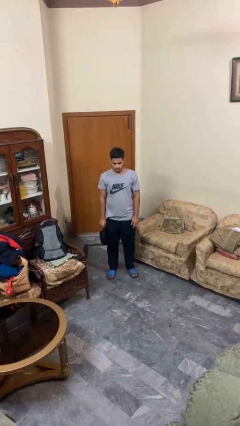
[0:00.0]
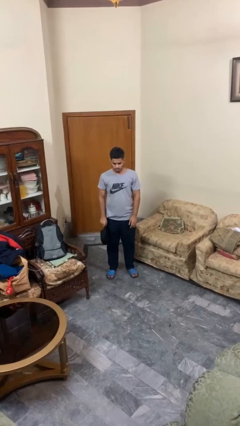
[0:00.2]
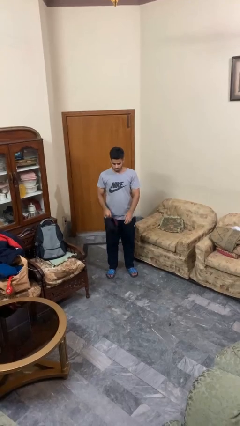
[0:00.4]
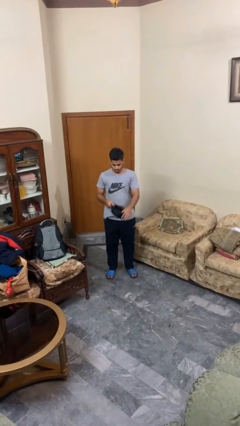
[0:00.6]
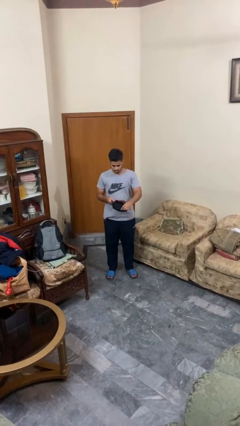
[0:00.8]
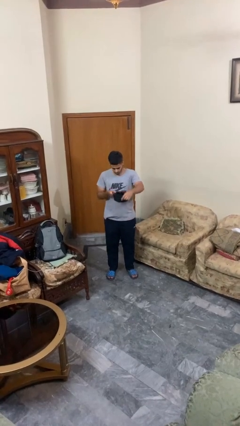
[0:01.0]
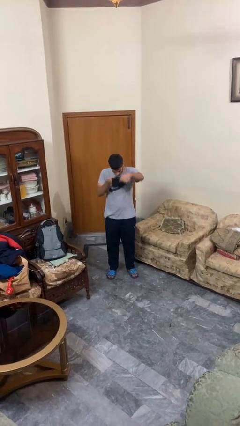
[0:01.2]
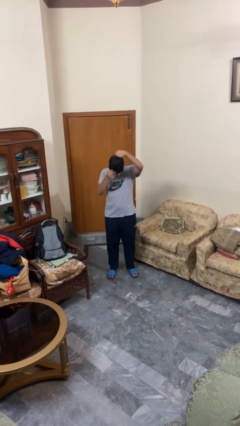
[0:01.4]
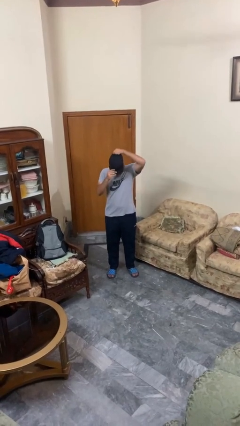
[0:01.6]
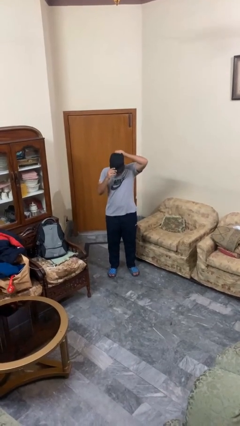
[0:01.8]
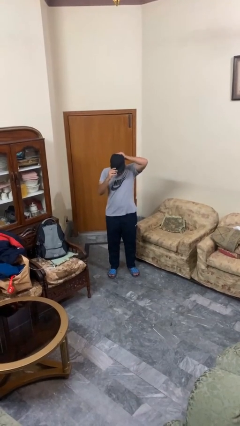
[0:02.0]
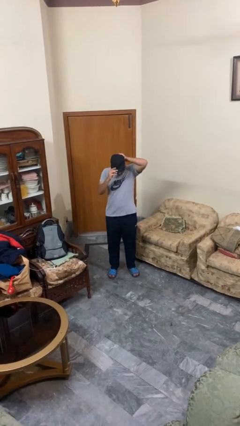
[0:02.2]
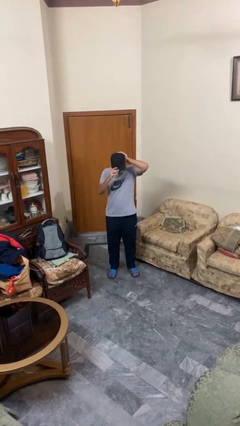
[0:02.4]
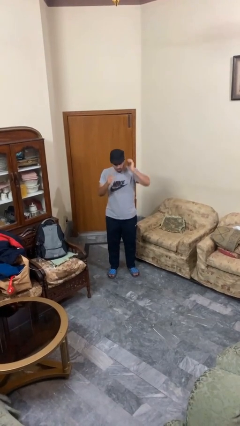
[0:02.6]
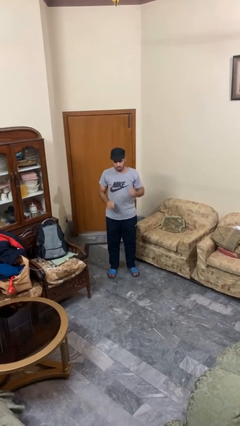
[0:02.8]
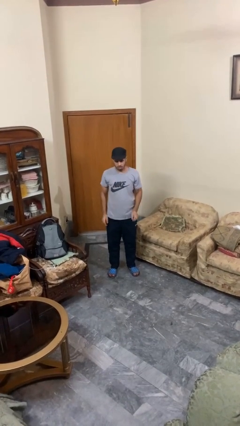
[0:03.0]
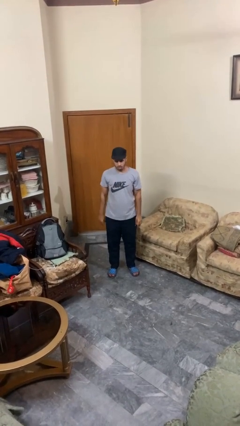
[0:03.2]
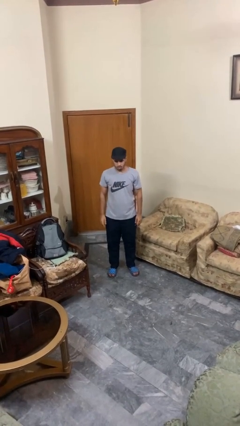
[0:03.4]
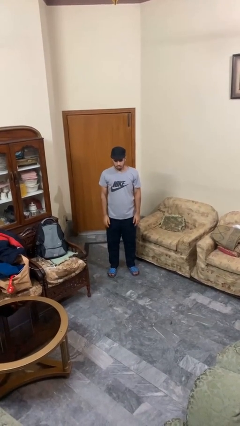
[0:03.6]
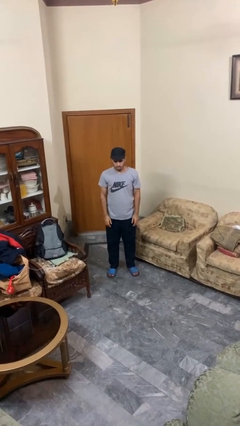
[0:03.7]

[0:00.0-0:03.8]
person puts on hat

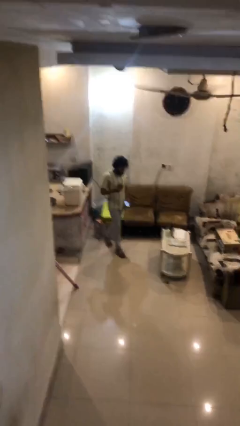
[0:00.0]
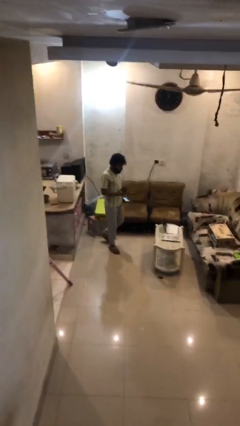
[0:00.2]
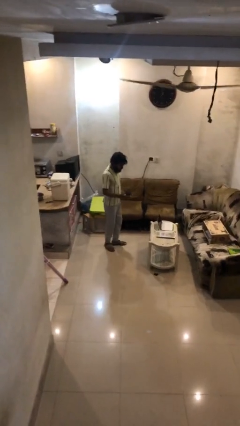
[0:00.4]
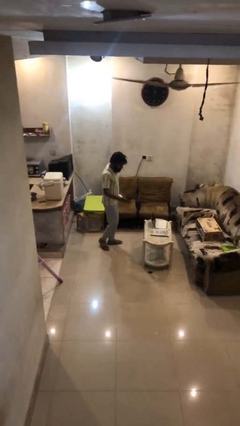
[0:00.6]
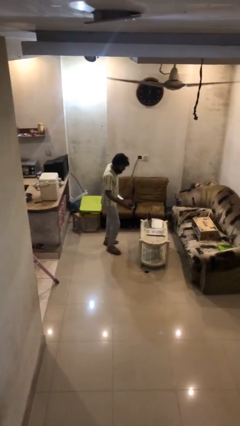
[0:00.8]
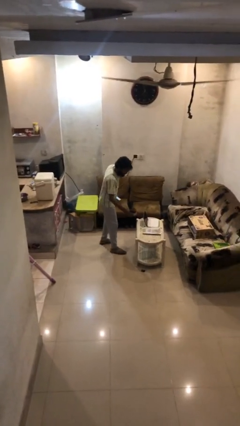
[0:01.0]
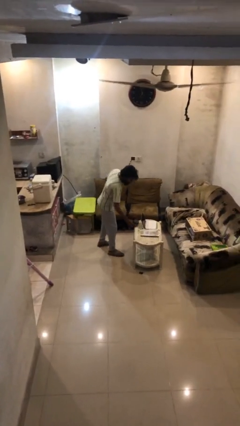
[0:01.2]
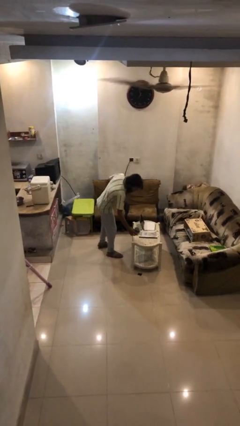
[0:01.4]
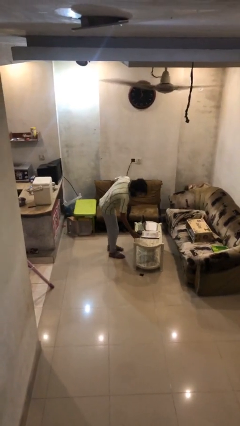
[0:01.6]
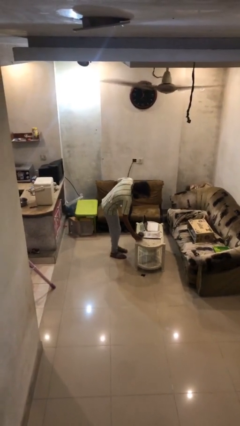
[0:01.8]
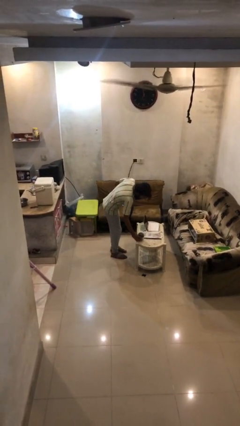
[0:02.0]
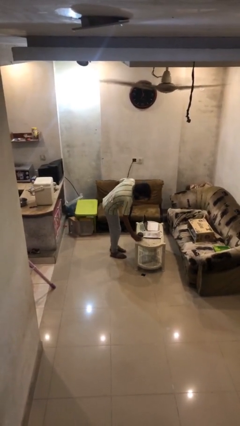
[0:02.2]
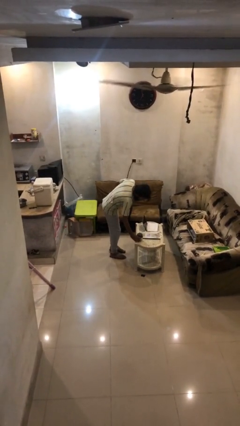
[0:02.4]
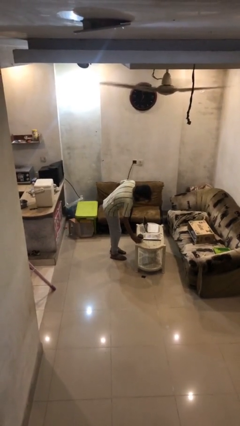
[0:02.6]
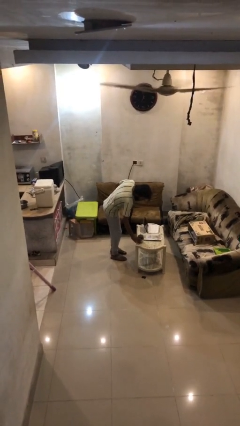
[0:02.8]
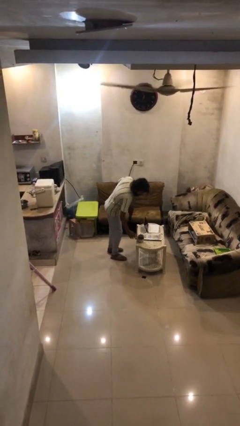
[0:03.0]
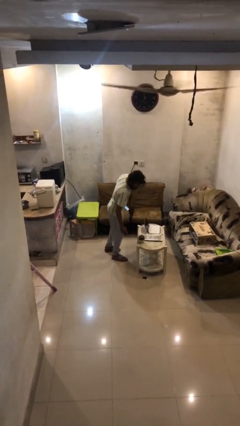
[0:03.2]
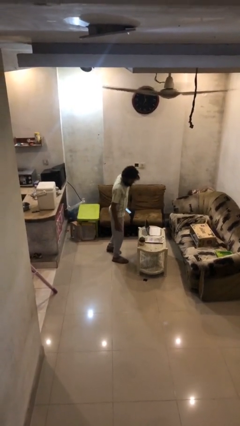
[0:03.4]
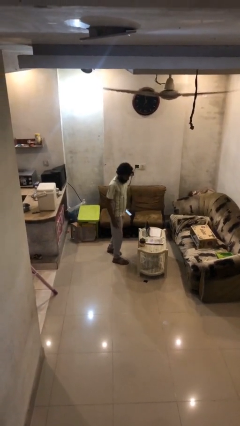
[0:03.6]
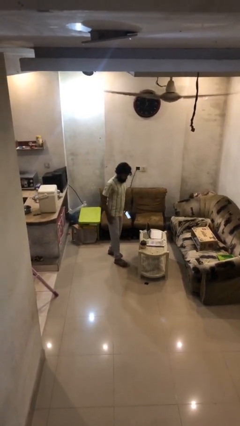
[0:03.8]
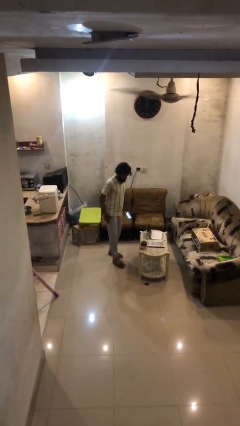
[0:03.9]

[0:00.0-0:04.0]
person puts down object on table

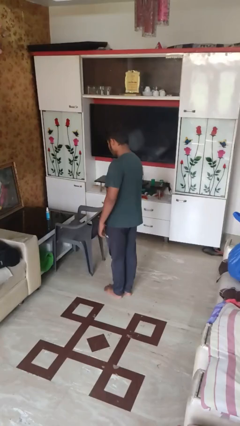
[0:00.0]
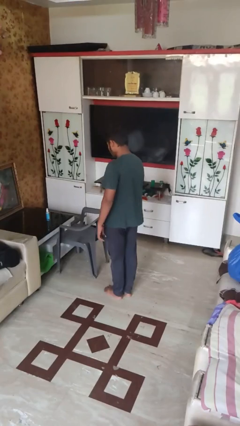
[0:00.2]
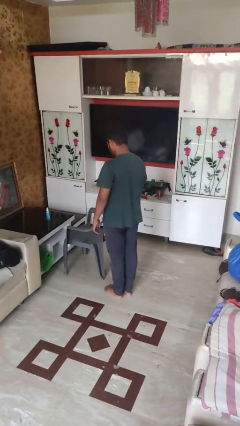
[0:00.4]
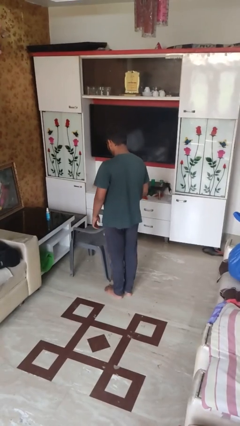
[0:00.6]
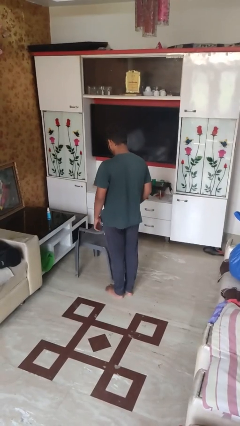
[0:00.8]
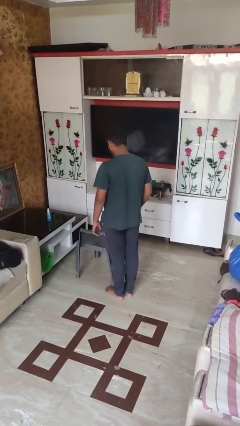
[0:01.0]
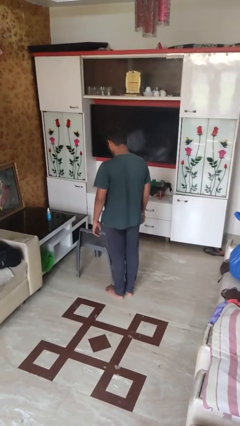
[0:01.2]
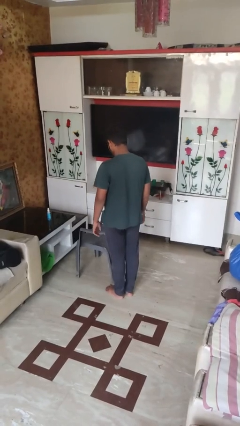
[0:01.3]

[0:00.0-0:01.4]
person pulls out chair

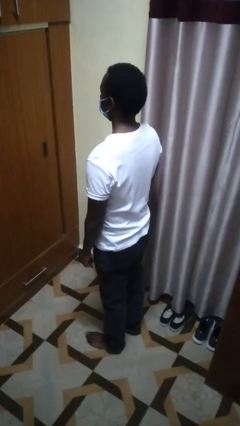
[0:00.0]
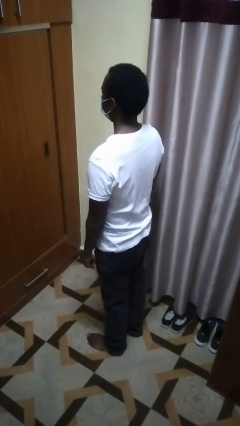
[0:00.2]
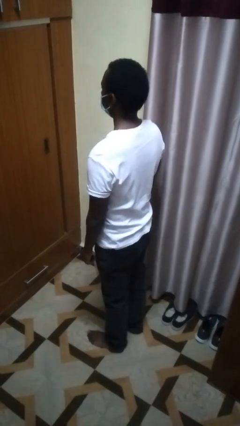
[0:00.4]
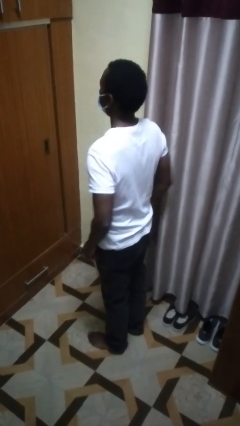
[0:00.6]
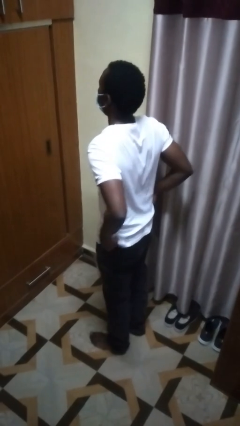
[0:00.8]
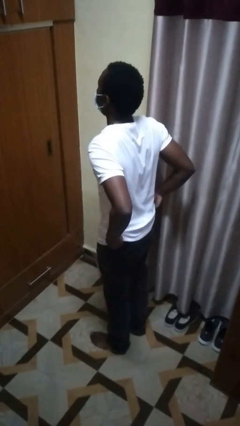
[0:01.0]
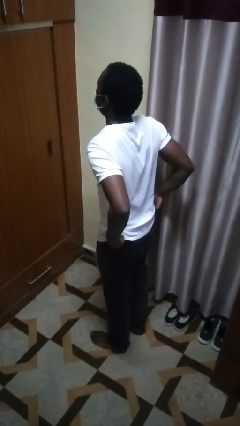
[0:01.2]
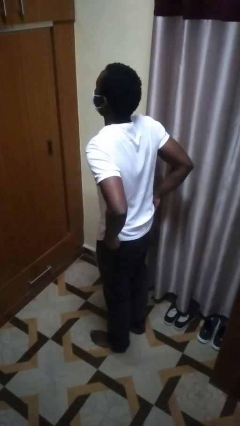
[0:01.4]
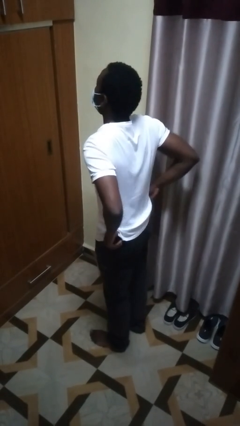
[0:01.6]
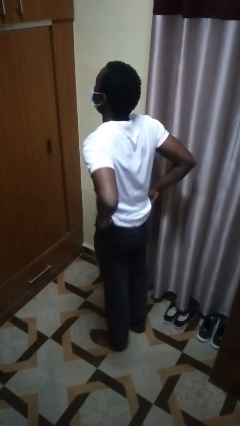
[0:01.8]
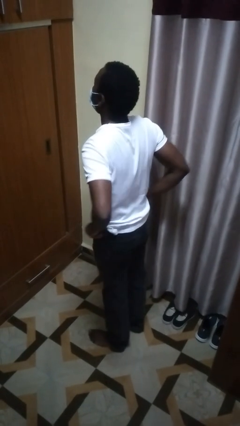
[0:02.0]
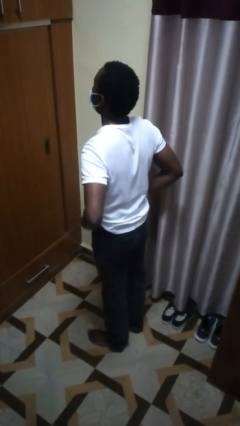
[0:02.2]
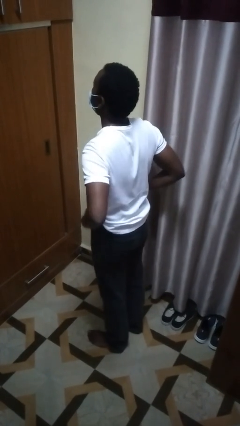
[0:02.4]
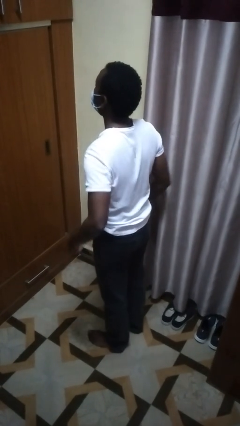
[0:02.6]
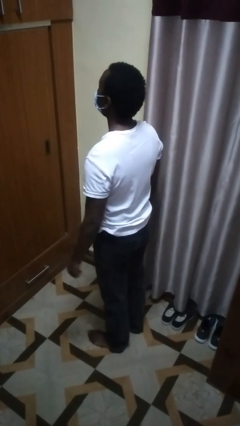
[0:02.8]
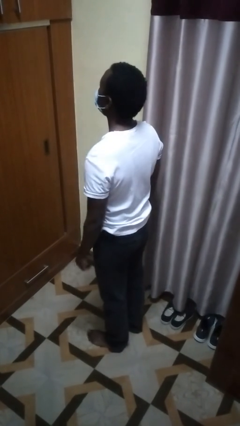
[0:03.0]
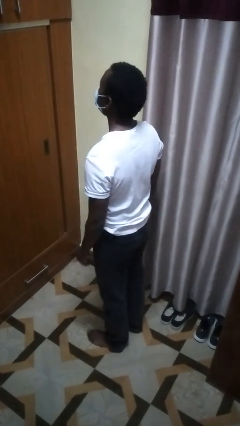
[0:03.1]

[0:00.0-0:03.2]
person hikes up pants

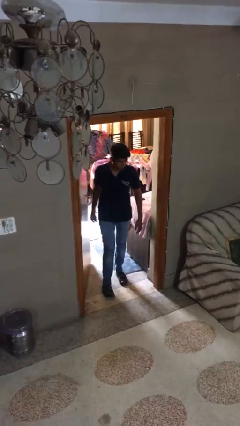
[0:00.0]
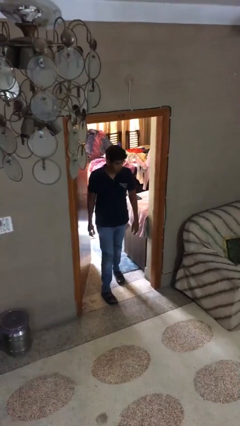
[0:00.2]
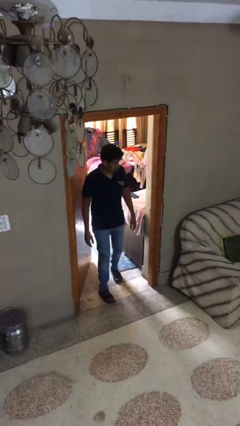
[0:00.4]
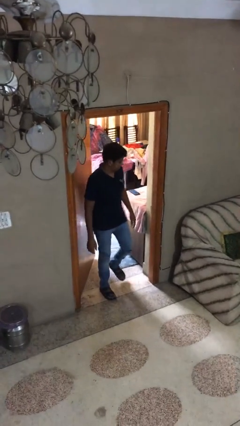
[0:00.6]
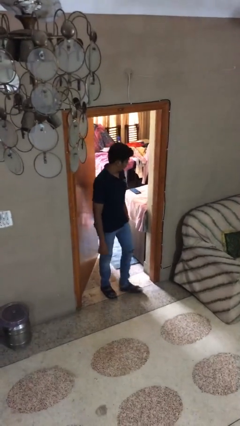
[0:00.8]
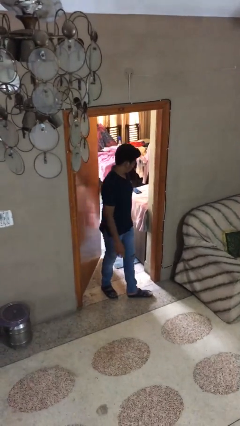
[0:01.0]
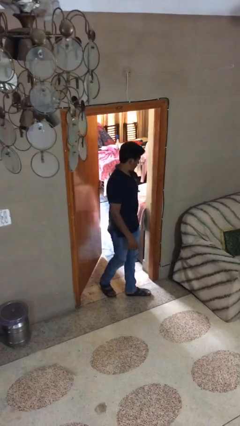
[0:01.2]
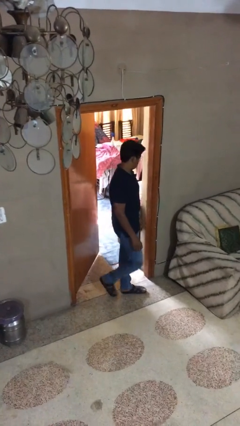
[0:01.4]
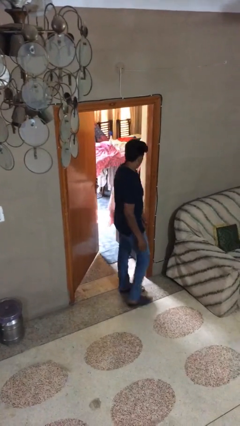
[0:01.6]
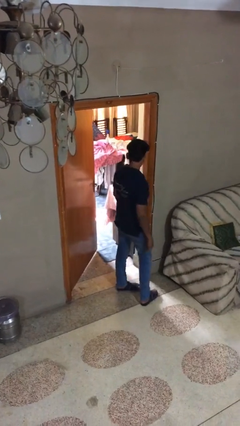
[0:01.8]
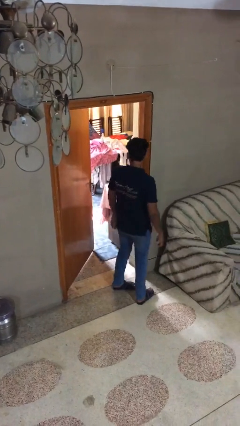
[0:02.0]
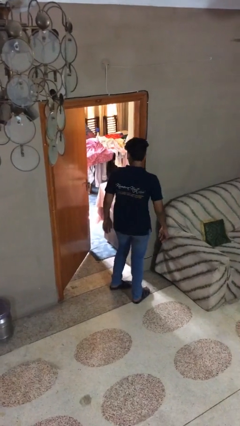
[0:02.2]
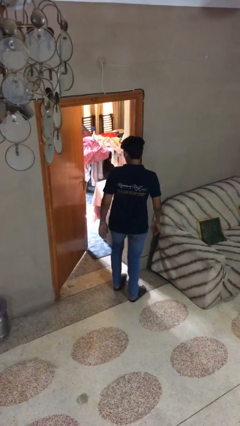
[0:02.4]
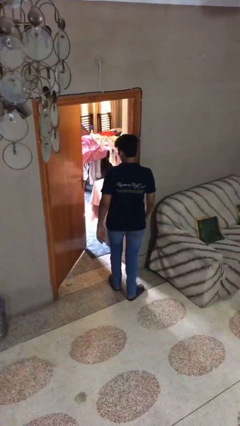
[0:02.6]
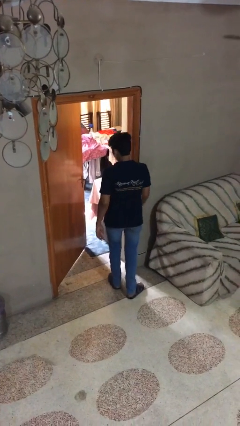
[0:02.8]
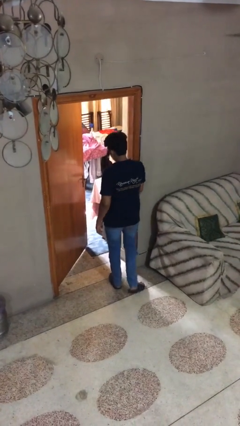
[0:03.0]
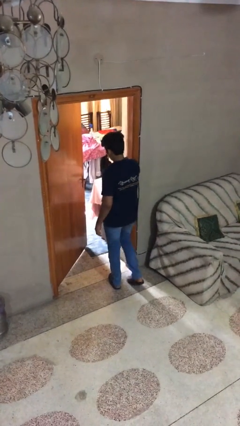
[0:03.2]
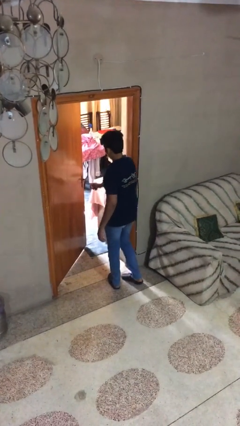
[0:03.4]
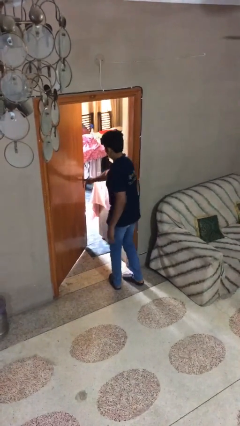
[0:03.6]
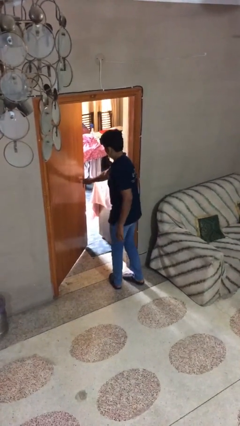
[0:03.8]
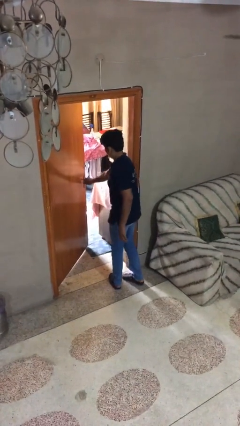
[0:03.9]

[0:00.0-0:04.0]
person enters scene through structure

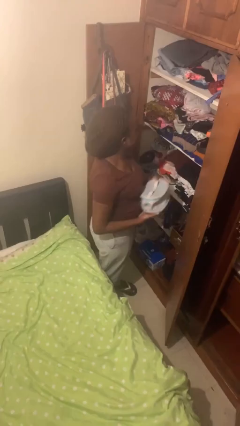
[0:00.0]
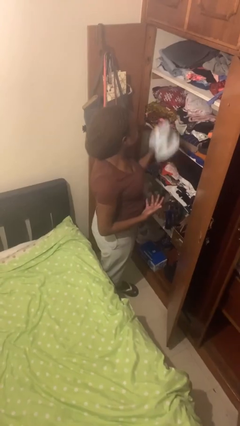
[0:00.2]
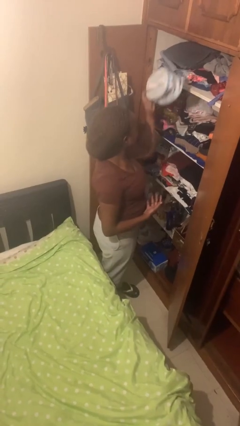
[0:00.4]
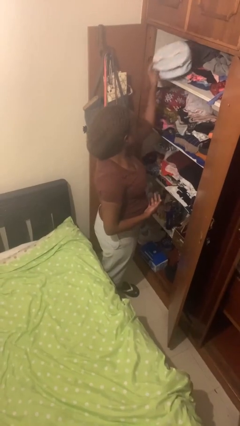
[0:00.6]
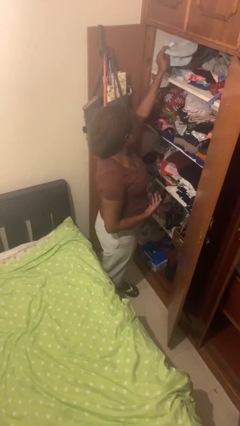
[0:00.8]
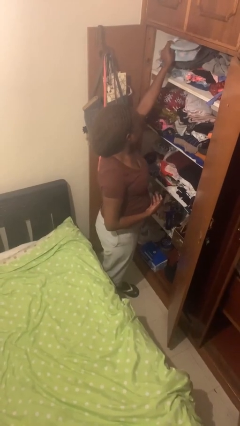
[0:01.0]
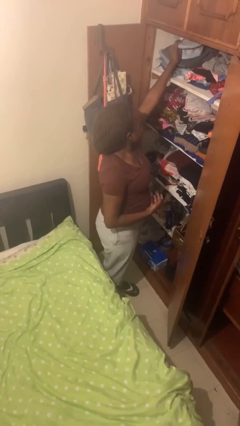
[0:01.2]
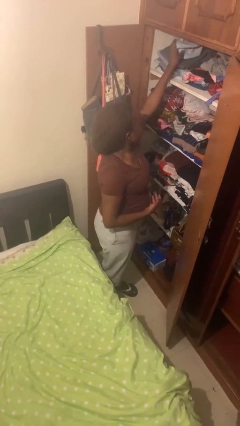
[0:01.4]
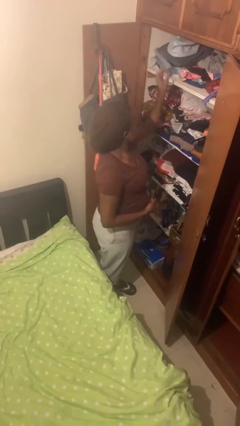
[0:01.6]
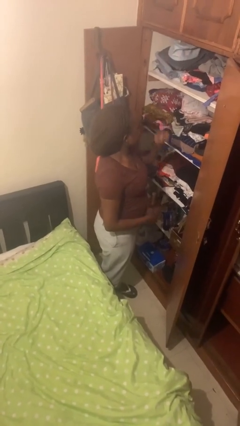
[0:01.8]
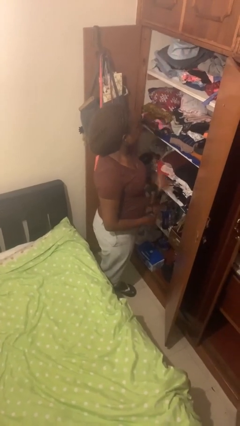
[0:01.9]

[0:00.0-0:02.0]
person puts down object on shelf
